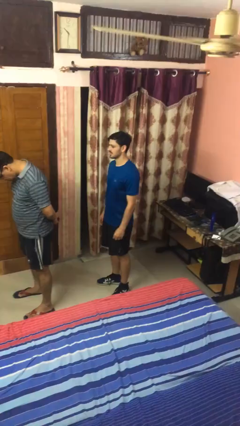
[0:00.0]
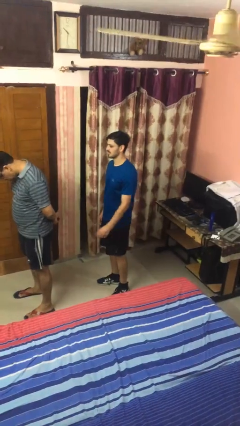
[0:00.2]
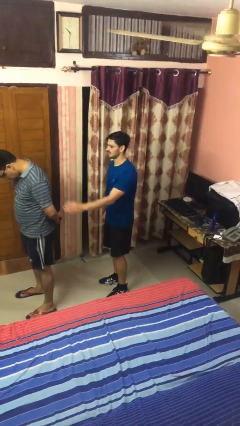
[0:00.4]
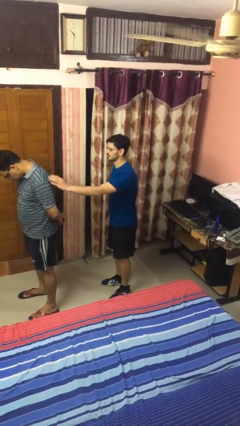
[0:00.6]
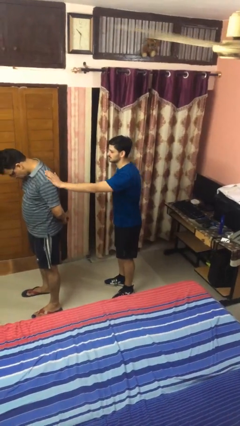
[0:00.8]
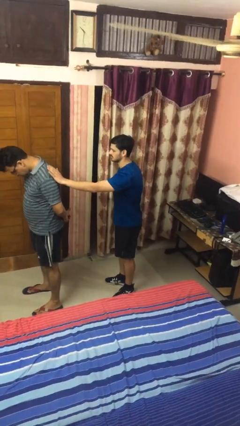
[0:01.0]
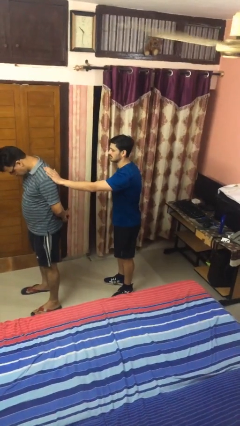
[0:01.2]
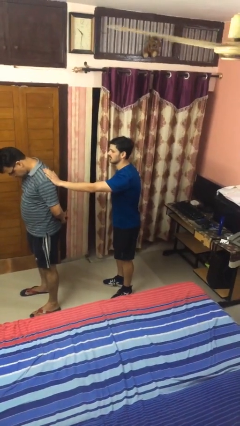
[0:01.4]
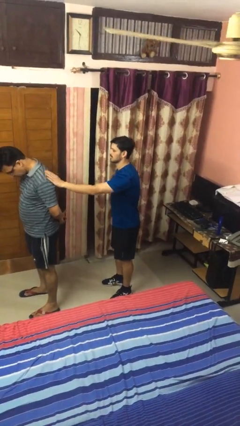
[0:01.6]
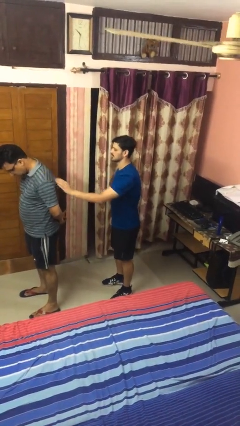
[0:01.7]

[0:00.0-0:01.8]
person touches back of person

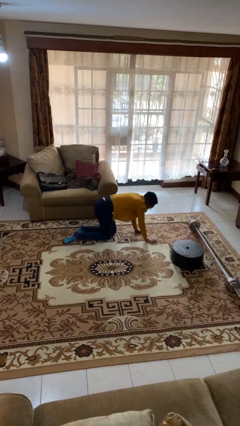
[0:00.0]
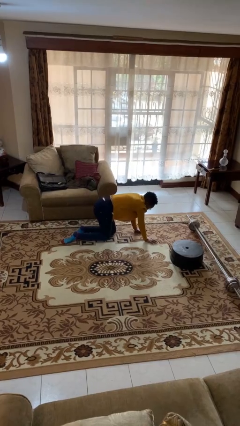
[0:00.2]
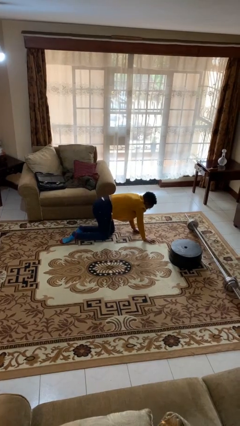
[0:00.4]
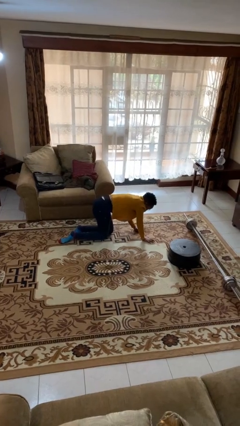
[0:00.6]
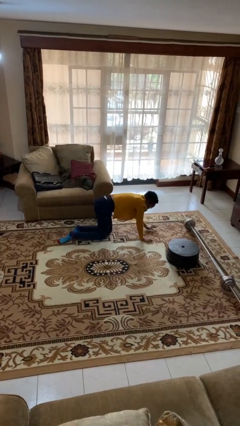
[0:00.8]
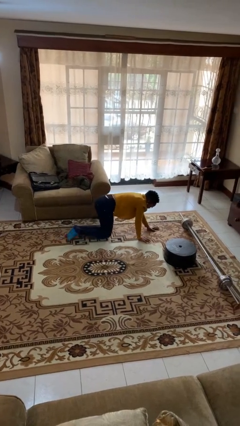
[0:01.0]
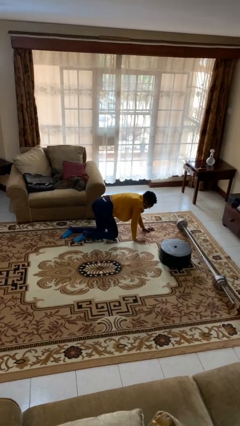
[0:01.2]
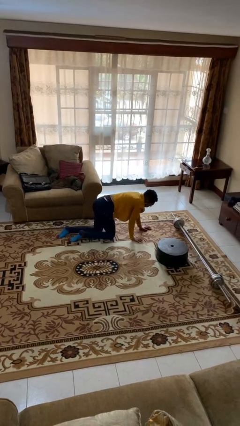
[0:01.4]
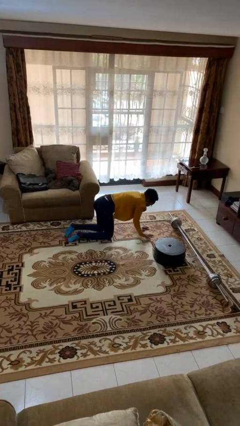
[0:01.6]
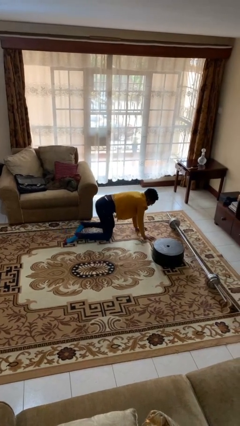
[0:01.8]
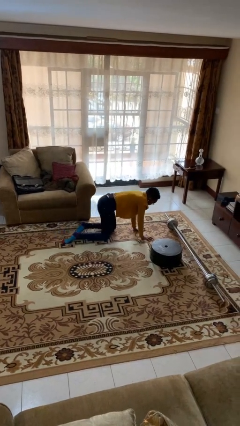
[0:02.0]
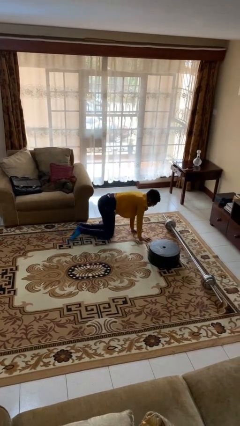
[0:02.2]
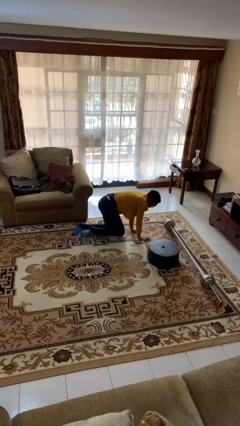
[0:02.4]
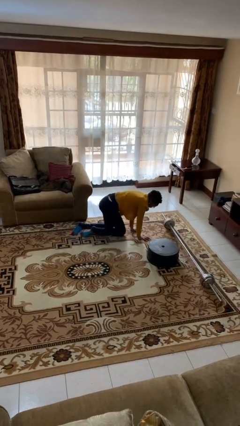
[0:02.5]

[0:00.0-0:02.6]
person crawls

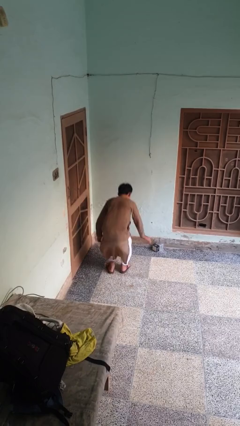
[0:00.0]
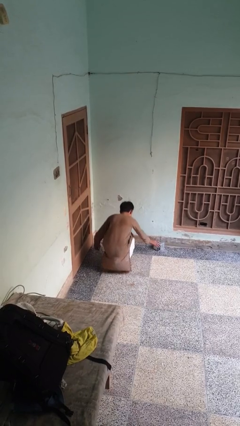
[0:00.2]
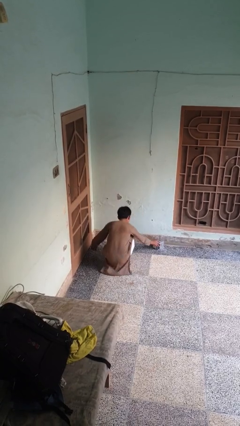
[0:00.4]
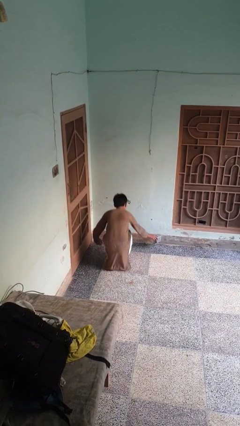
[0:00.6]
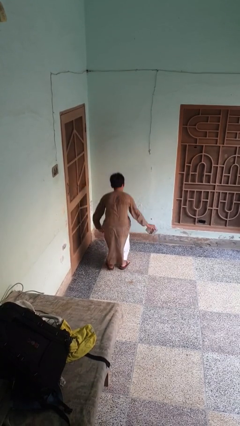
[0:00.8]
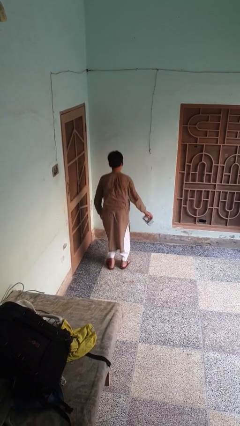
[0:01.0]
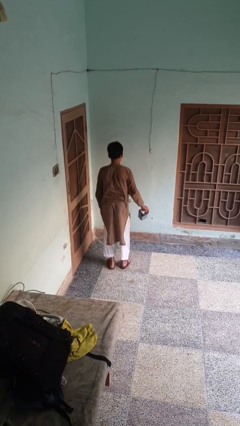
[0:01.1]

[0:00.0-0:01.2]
person picks up object from floor

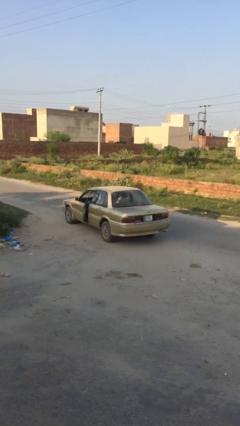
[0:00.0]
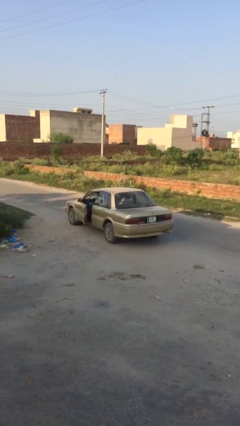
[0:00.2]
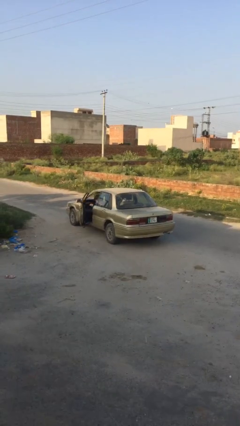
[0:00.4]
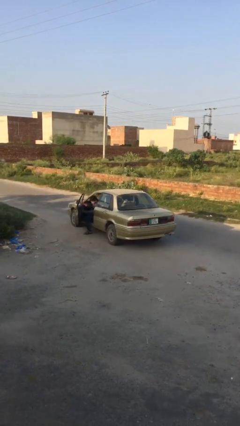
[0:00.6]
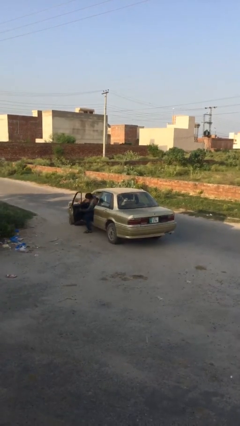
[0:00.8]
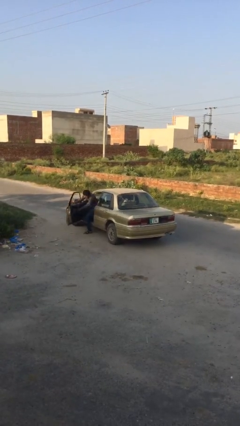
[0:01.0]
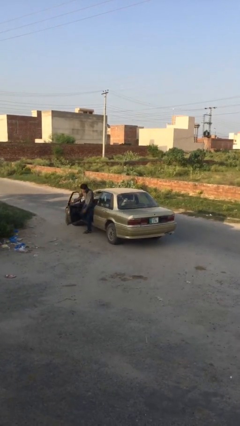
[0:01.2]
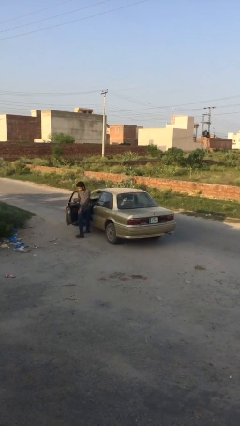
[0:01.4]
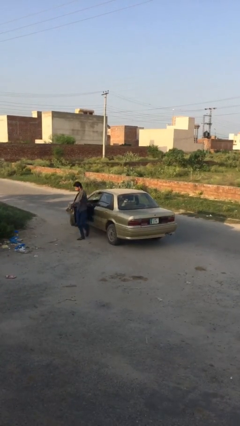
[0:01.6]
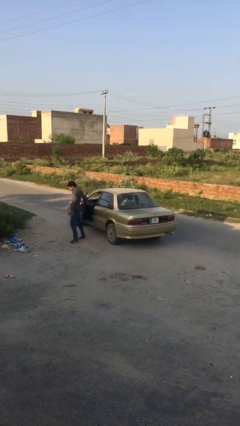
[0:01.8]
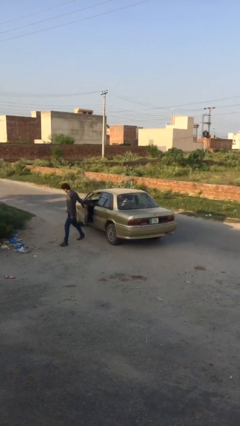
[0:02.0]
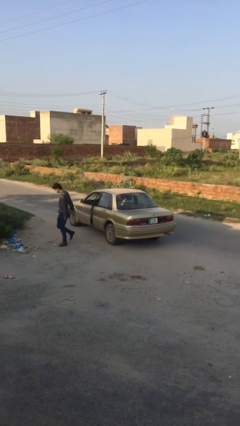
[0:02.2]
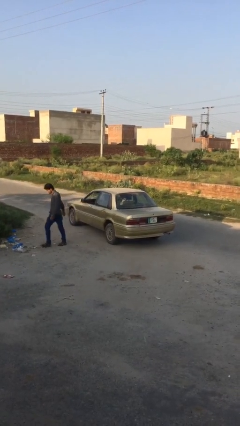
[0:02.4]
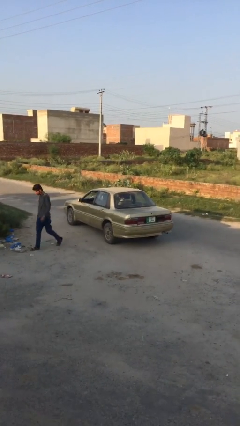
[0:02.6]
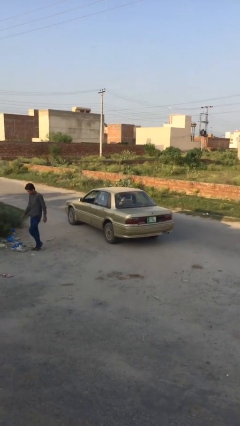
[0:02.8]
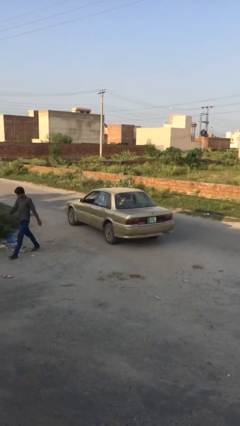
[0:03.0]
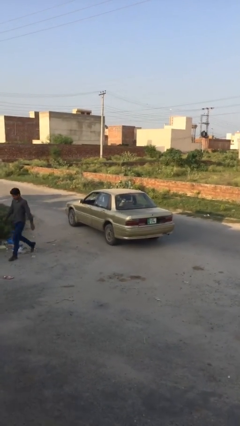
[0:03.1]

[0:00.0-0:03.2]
car drops off person

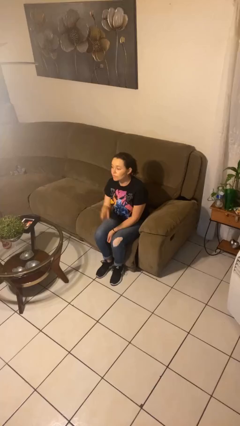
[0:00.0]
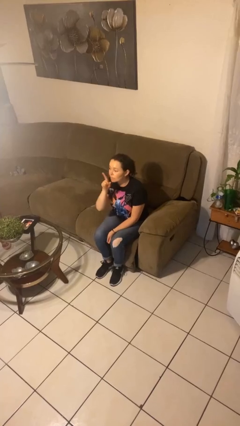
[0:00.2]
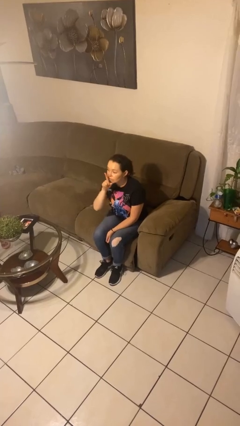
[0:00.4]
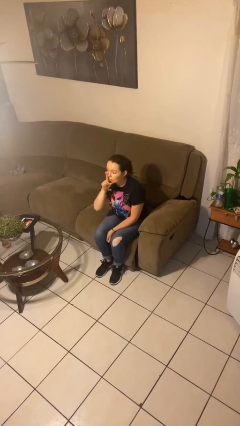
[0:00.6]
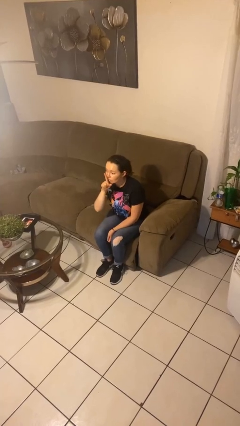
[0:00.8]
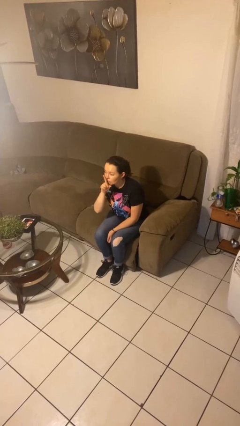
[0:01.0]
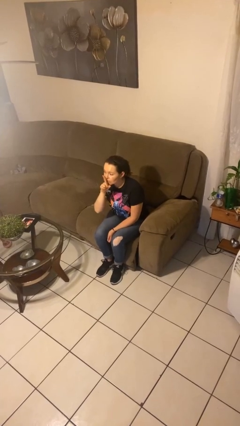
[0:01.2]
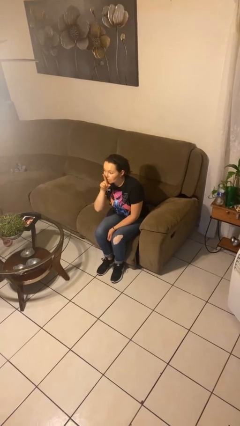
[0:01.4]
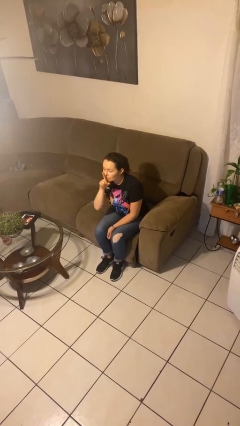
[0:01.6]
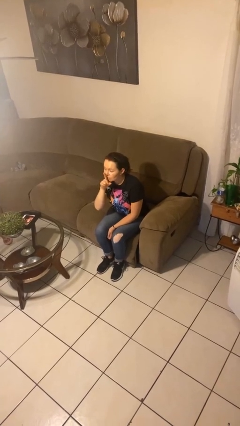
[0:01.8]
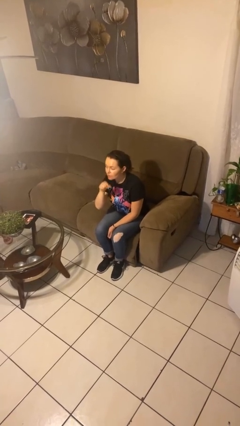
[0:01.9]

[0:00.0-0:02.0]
person gestures be quiet

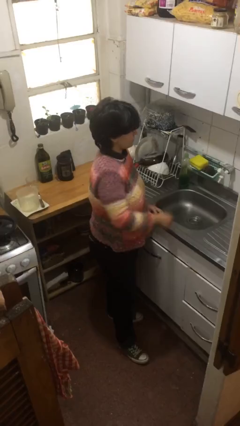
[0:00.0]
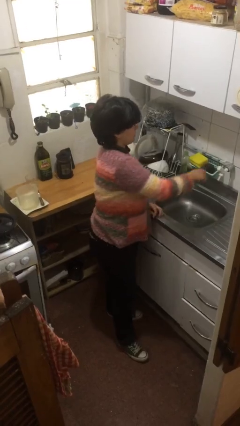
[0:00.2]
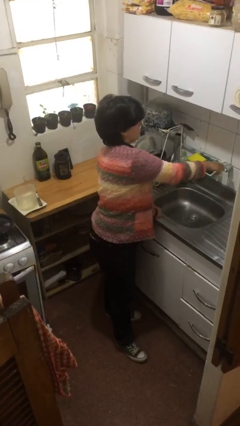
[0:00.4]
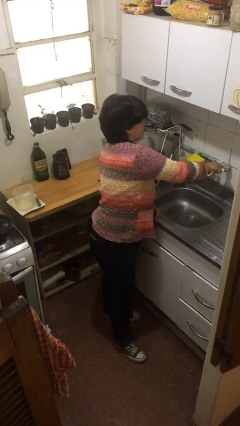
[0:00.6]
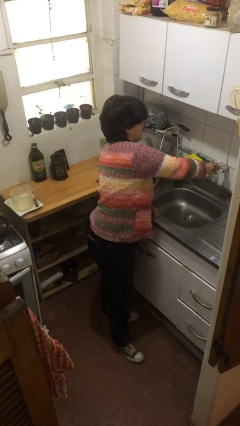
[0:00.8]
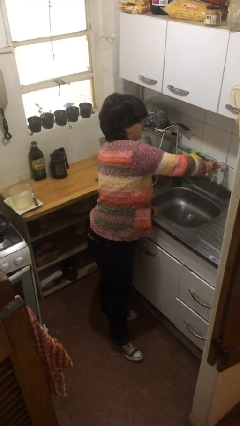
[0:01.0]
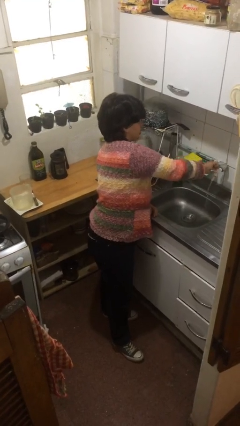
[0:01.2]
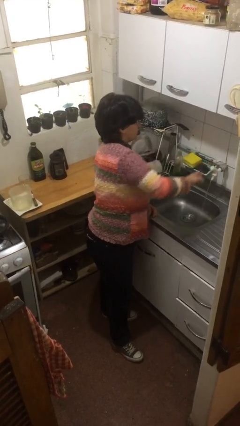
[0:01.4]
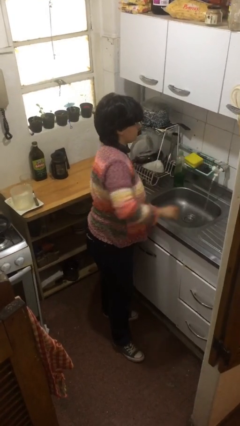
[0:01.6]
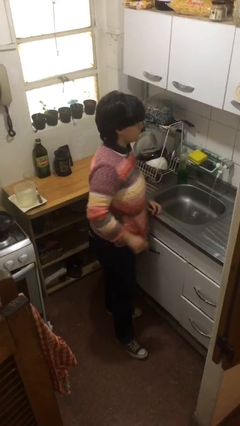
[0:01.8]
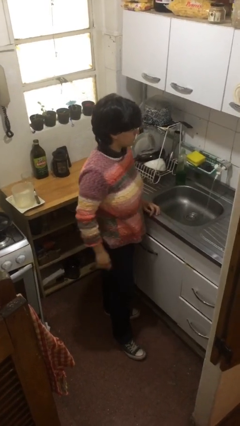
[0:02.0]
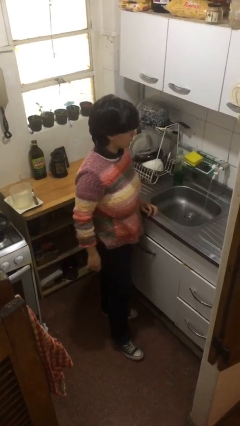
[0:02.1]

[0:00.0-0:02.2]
person turns on faucet

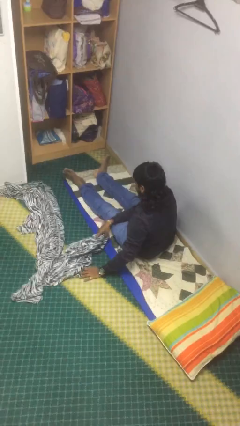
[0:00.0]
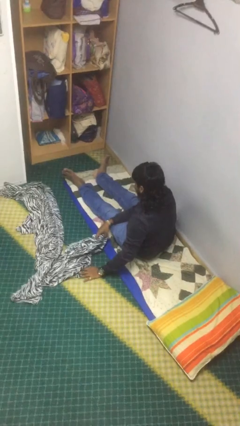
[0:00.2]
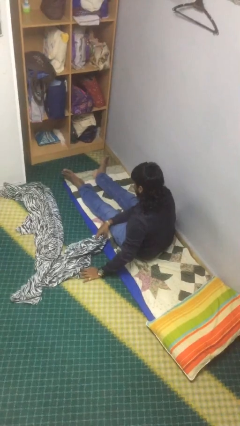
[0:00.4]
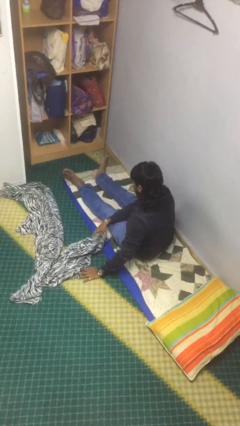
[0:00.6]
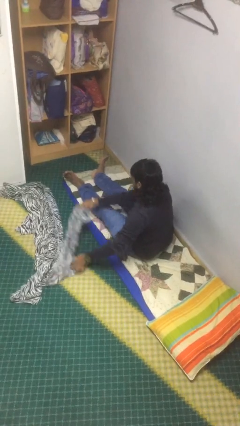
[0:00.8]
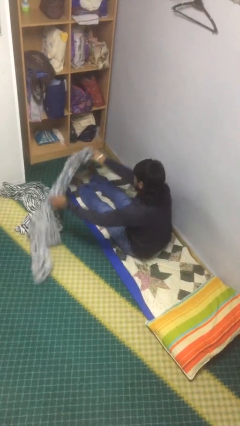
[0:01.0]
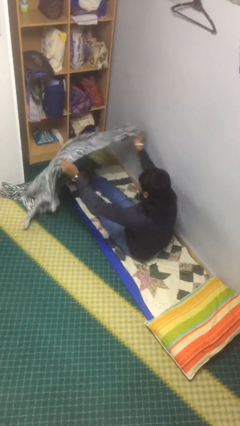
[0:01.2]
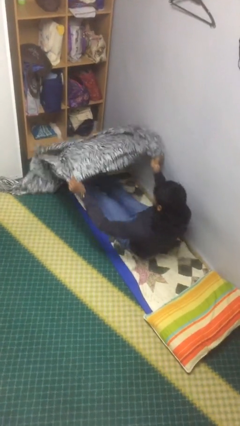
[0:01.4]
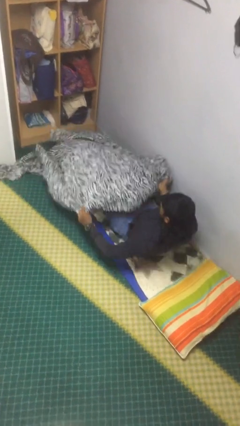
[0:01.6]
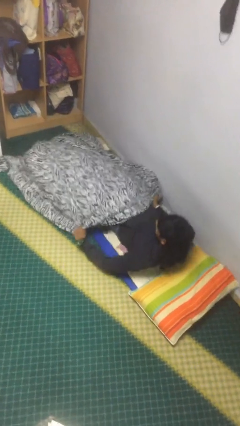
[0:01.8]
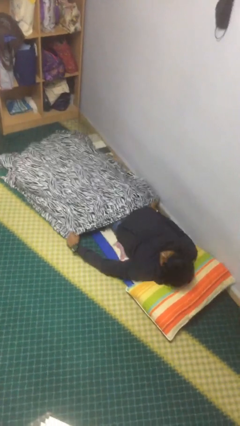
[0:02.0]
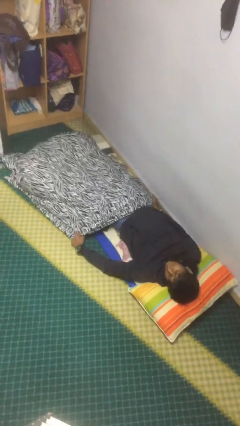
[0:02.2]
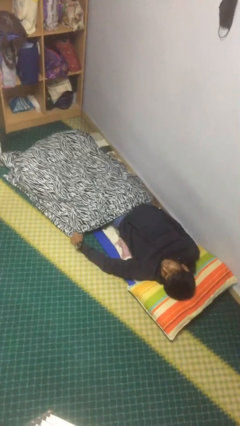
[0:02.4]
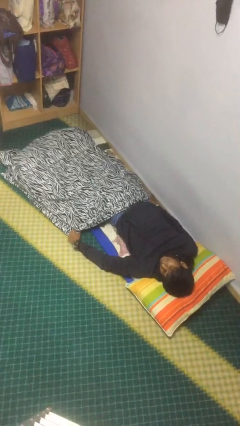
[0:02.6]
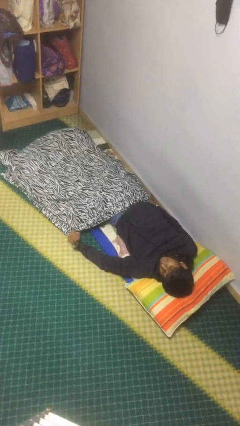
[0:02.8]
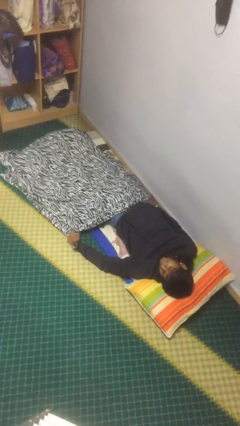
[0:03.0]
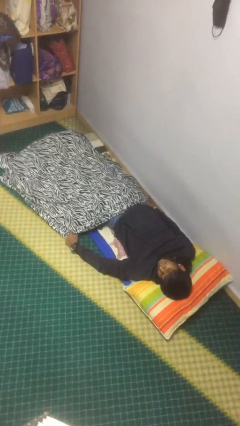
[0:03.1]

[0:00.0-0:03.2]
person covers with blanket

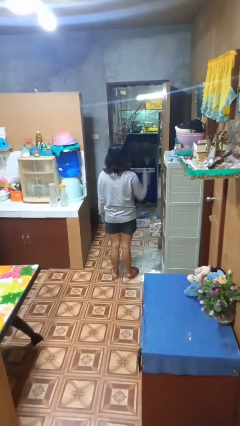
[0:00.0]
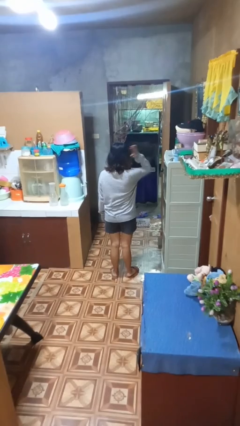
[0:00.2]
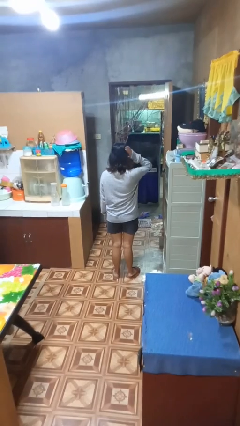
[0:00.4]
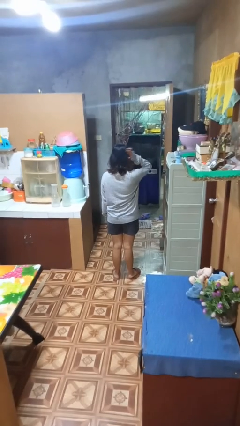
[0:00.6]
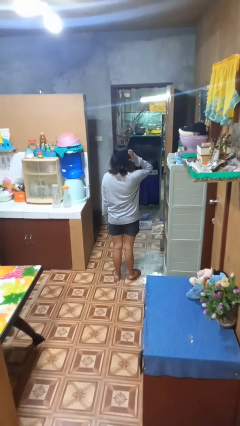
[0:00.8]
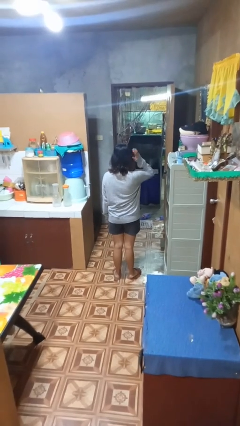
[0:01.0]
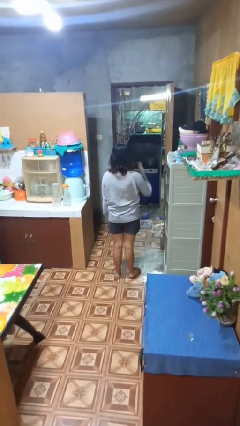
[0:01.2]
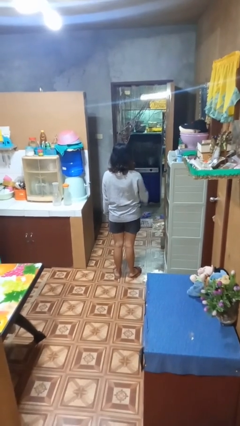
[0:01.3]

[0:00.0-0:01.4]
person pats head
